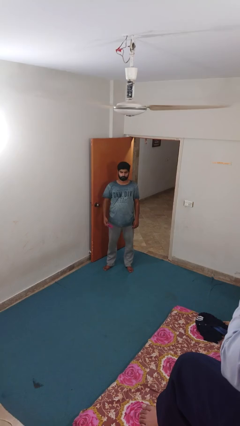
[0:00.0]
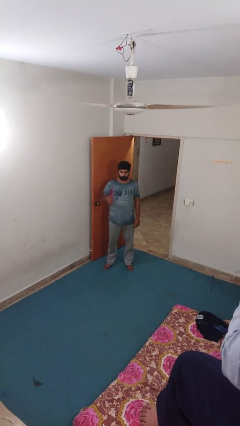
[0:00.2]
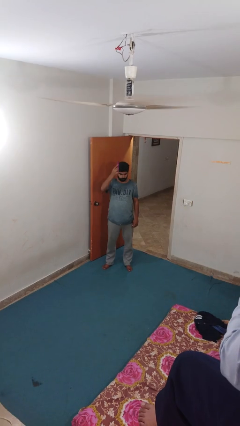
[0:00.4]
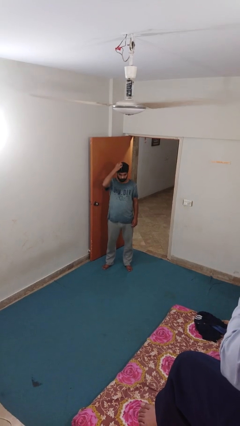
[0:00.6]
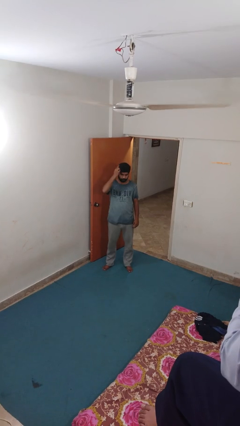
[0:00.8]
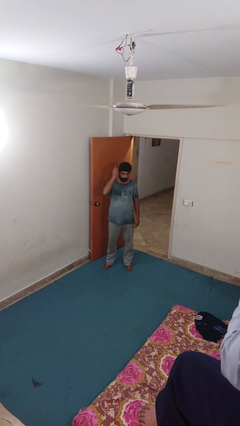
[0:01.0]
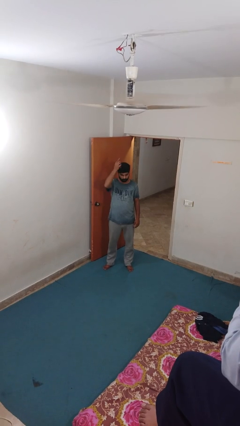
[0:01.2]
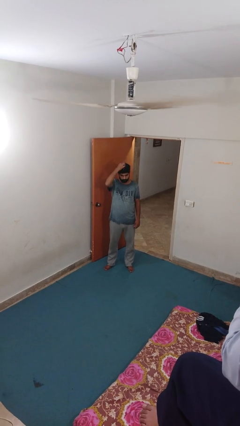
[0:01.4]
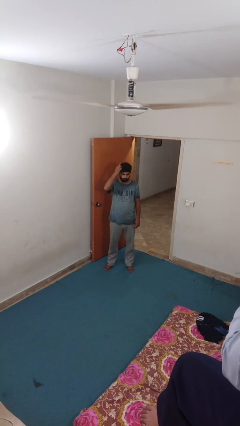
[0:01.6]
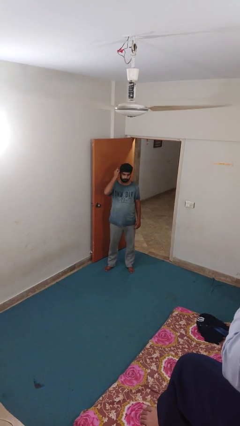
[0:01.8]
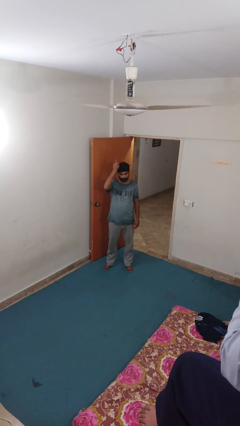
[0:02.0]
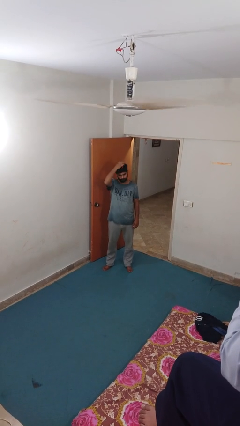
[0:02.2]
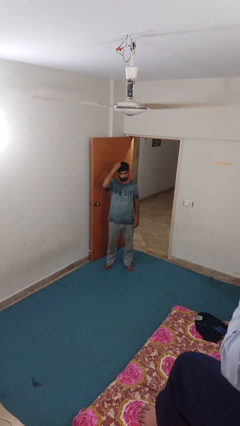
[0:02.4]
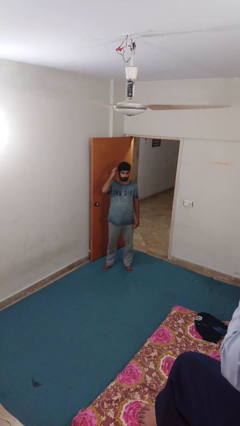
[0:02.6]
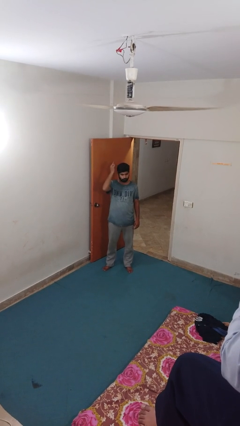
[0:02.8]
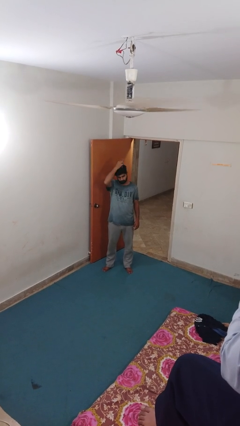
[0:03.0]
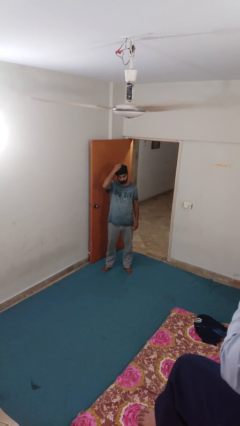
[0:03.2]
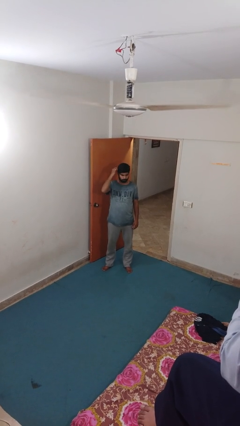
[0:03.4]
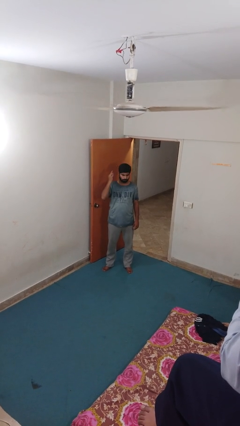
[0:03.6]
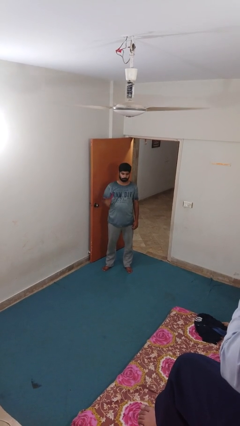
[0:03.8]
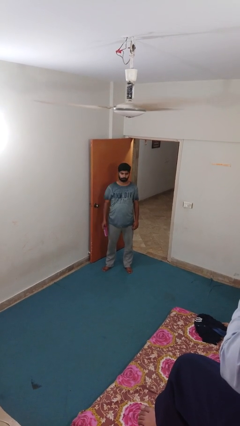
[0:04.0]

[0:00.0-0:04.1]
person brushes hair

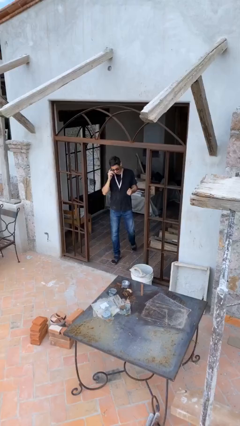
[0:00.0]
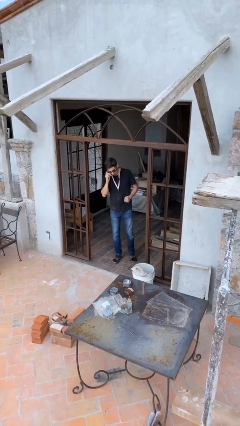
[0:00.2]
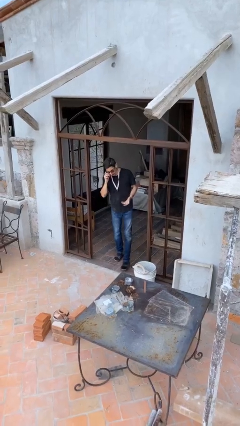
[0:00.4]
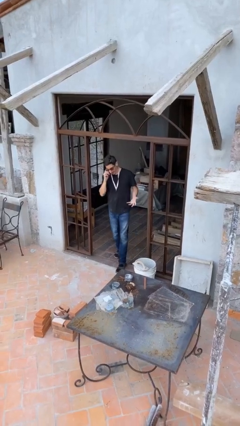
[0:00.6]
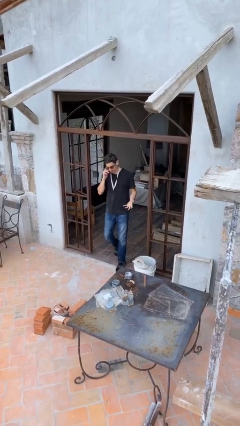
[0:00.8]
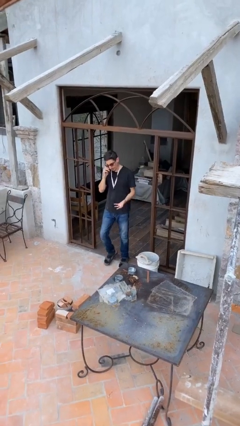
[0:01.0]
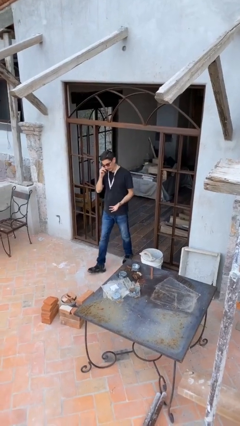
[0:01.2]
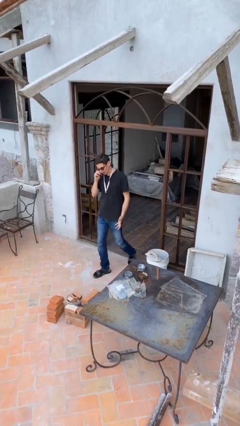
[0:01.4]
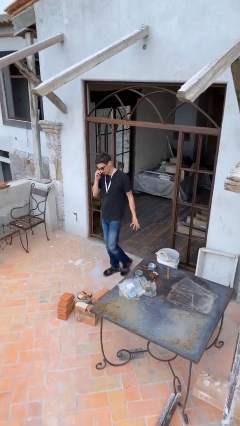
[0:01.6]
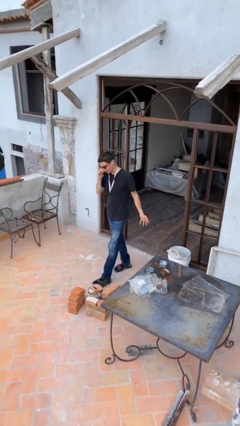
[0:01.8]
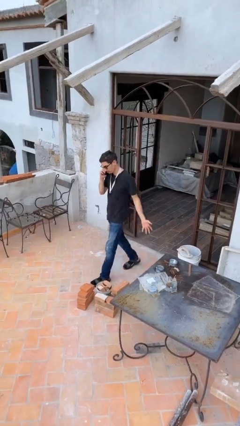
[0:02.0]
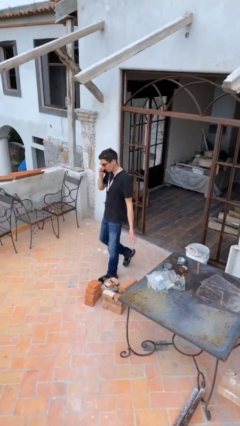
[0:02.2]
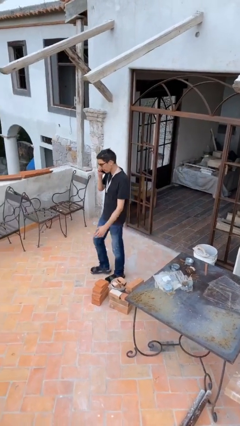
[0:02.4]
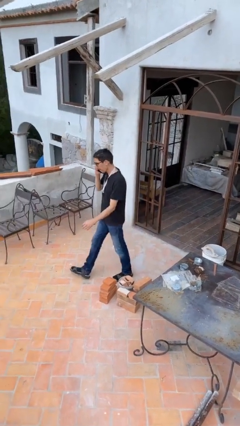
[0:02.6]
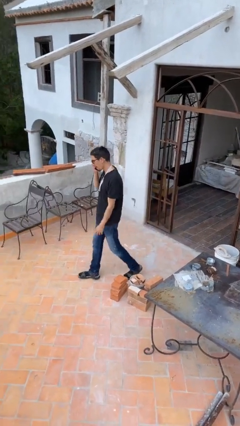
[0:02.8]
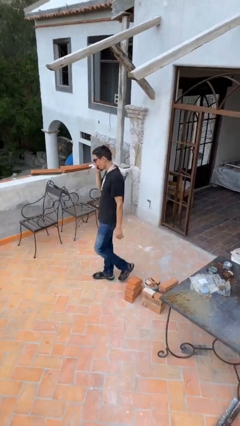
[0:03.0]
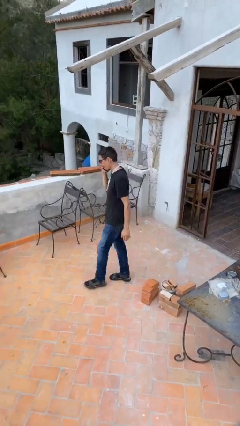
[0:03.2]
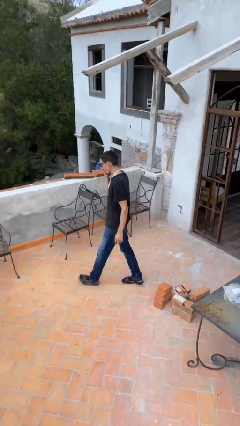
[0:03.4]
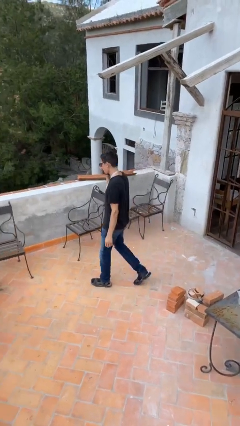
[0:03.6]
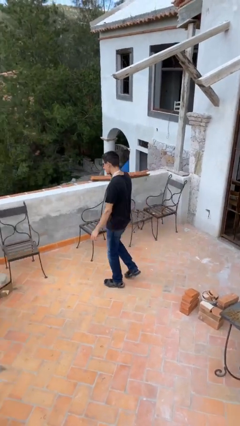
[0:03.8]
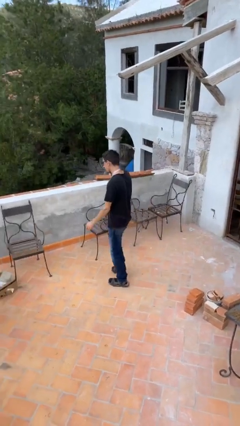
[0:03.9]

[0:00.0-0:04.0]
person enters scene through structure

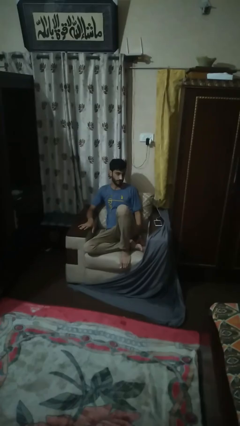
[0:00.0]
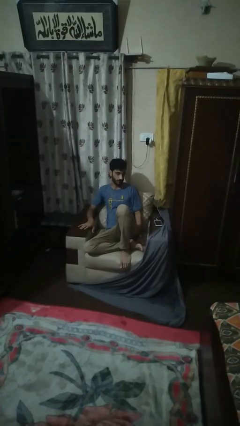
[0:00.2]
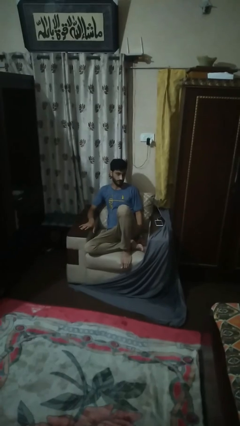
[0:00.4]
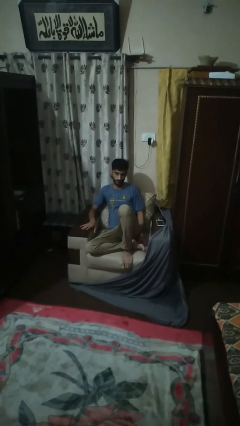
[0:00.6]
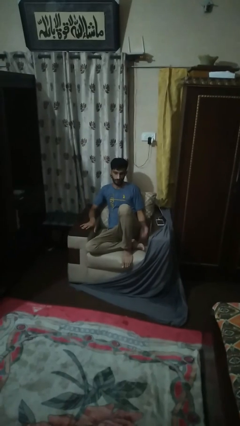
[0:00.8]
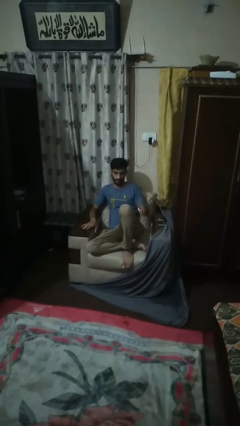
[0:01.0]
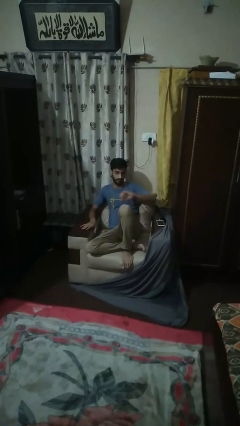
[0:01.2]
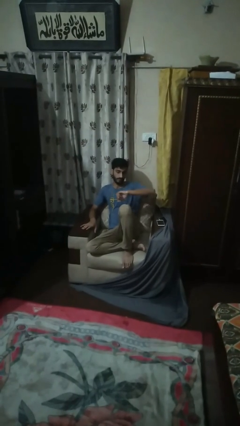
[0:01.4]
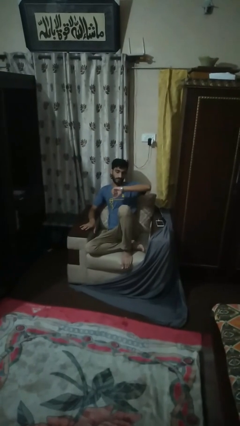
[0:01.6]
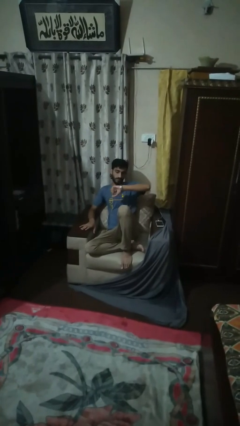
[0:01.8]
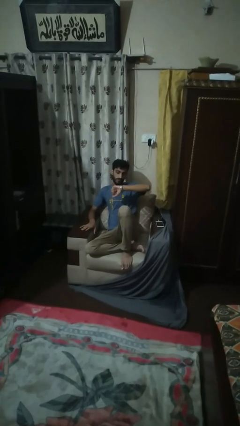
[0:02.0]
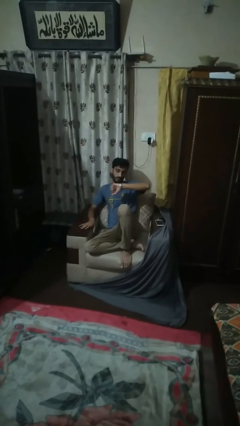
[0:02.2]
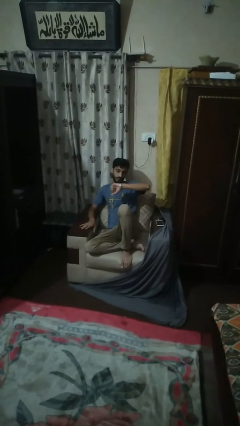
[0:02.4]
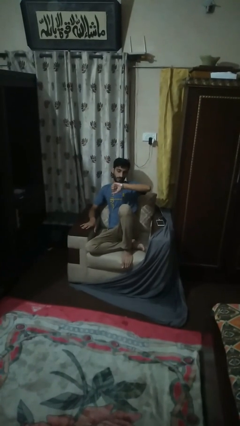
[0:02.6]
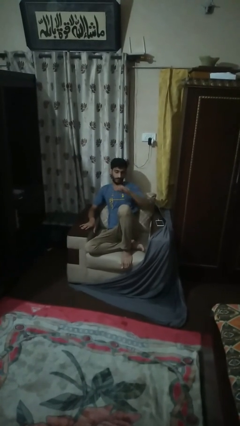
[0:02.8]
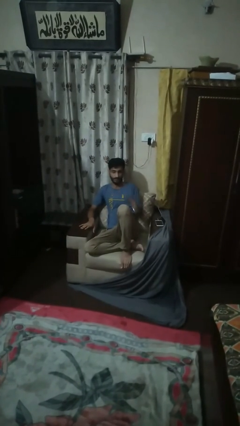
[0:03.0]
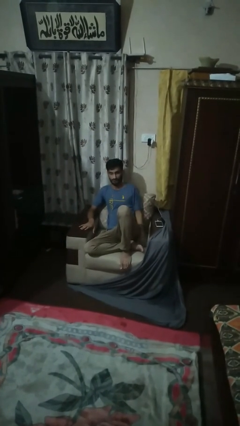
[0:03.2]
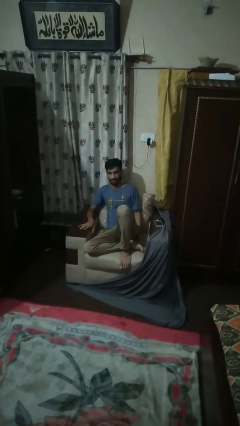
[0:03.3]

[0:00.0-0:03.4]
person looks at wristwatch

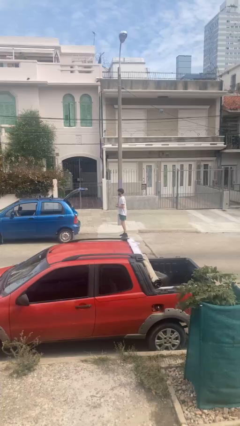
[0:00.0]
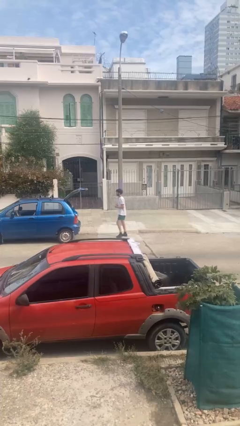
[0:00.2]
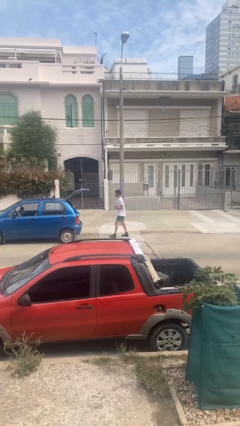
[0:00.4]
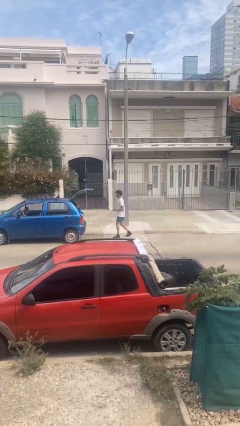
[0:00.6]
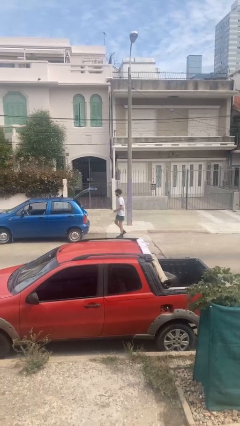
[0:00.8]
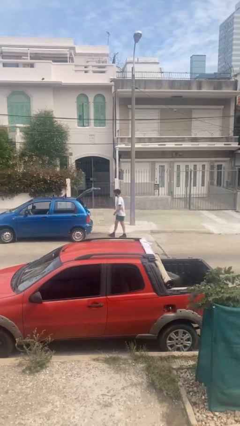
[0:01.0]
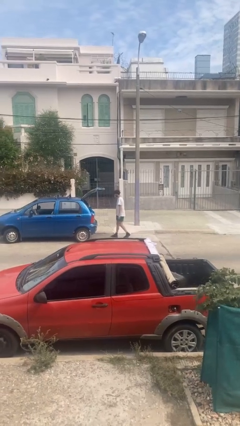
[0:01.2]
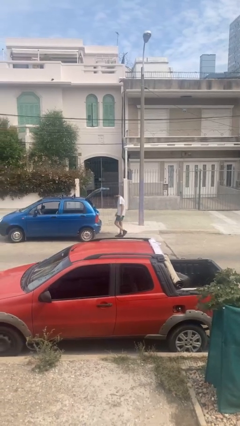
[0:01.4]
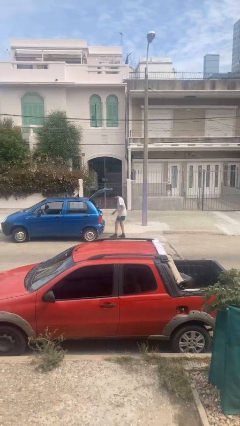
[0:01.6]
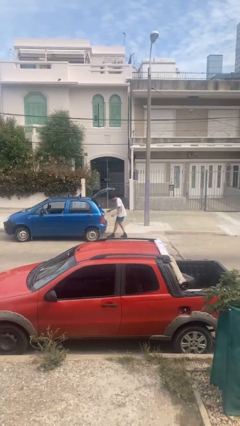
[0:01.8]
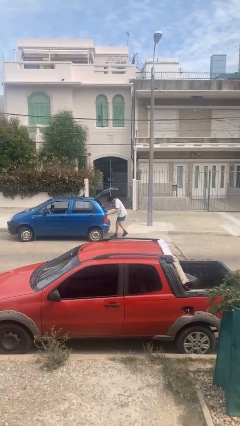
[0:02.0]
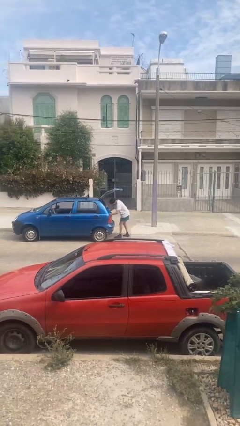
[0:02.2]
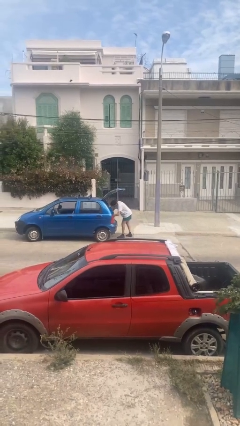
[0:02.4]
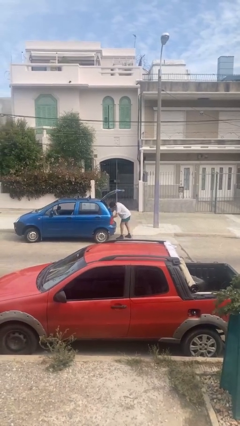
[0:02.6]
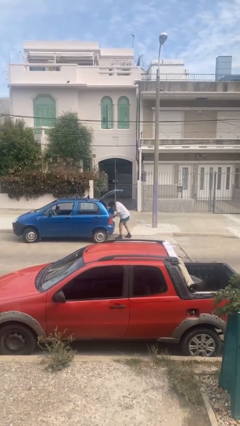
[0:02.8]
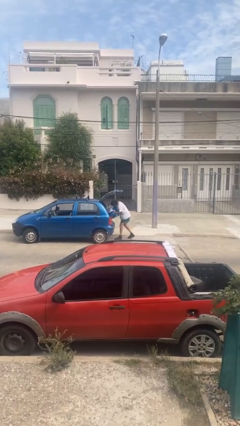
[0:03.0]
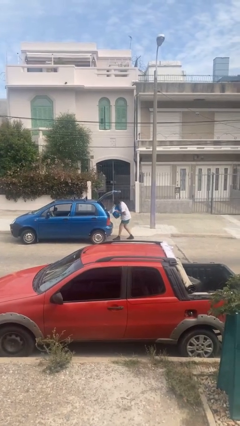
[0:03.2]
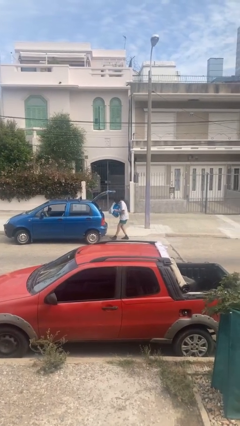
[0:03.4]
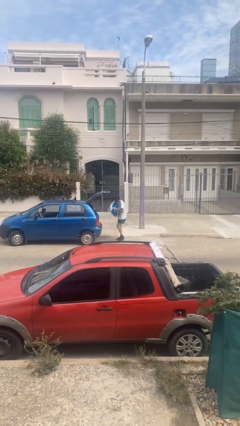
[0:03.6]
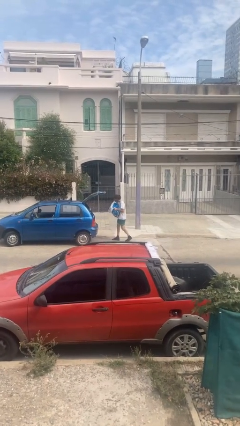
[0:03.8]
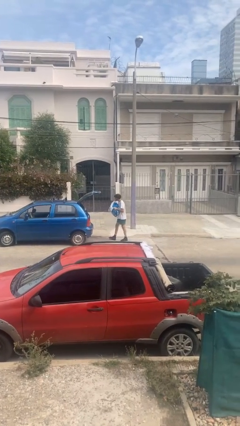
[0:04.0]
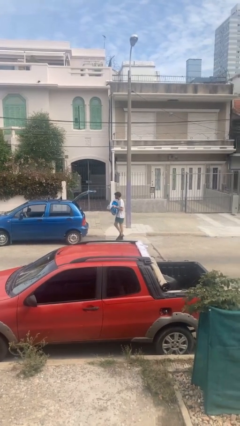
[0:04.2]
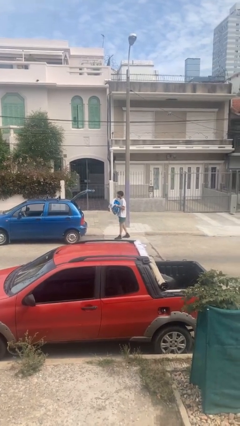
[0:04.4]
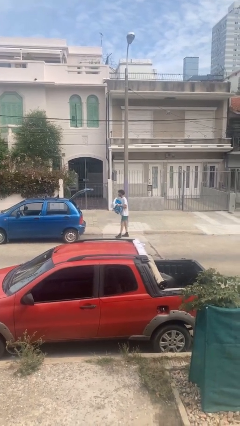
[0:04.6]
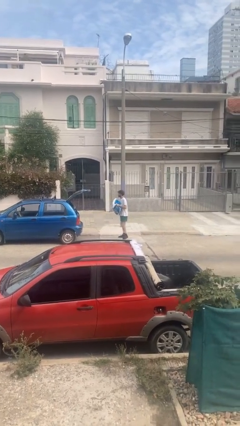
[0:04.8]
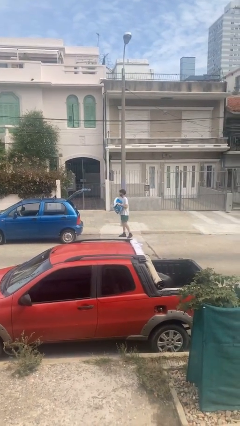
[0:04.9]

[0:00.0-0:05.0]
person unloads car

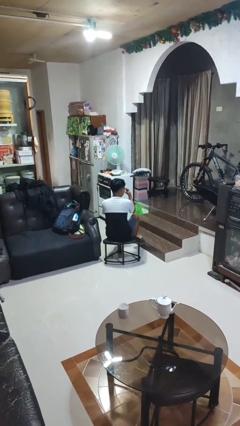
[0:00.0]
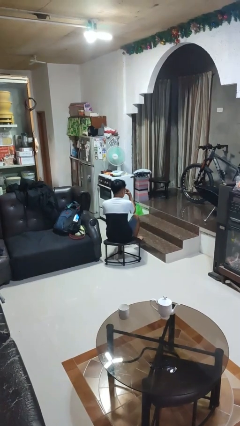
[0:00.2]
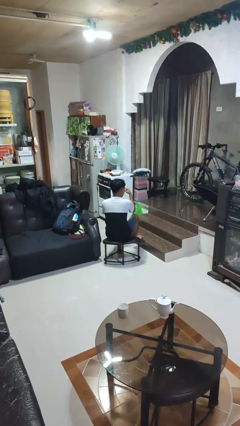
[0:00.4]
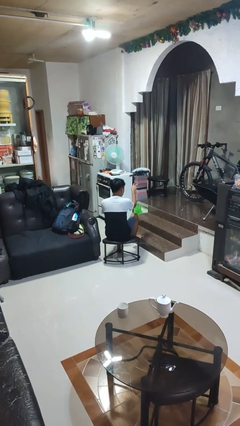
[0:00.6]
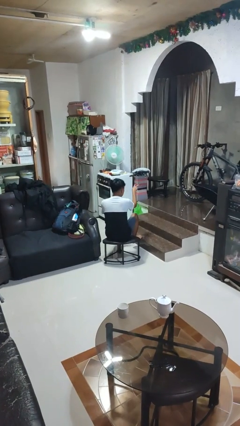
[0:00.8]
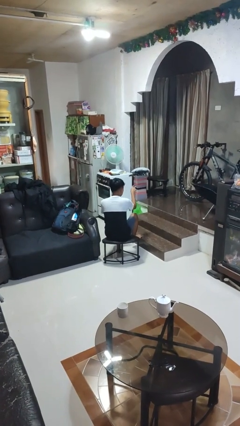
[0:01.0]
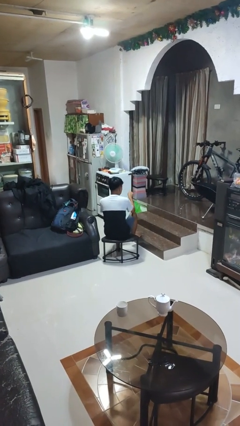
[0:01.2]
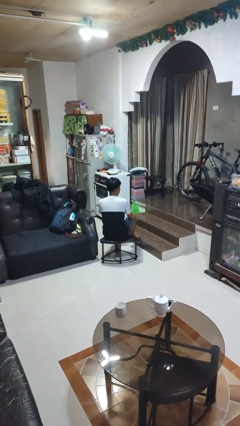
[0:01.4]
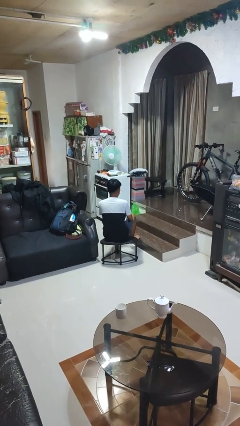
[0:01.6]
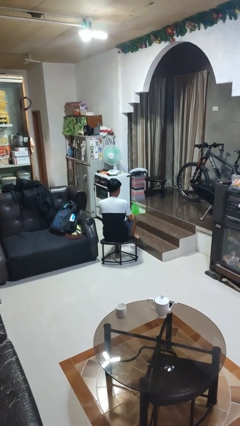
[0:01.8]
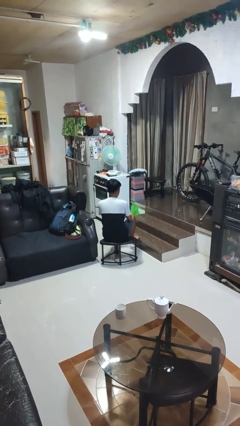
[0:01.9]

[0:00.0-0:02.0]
person gestures watch closely
